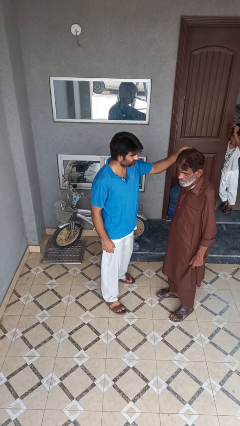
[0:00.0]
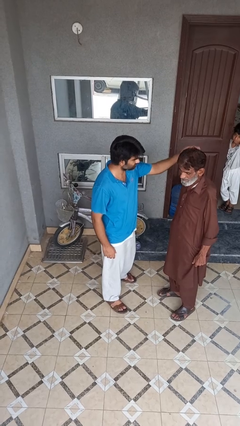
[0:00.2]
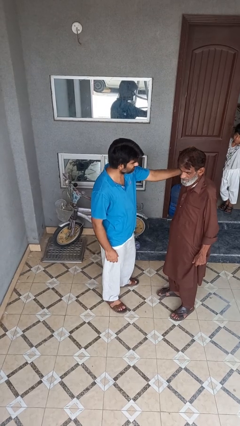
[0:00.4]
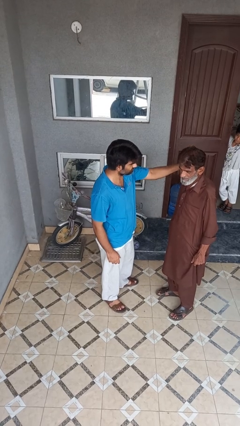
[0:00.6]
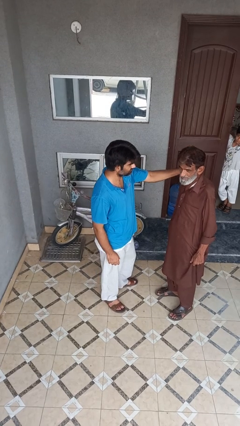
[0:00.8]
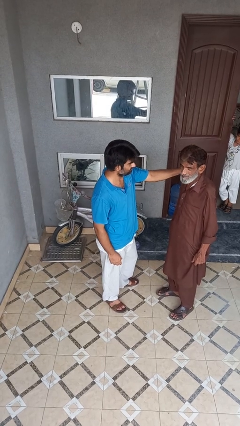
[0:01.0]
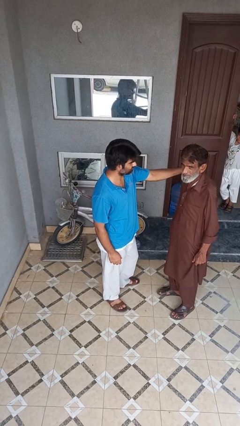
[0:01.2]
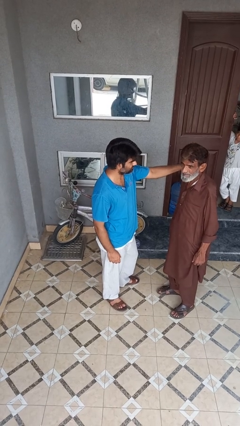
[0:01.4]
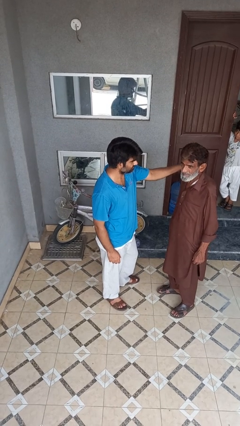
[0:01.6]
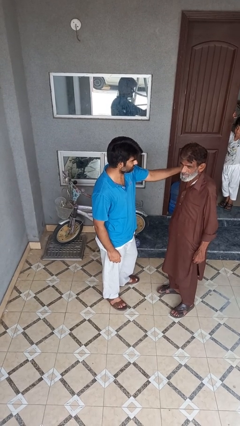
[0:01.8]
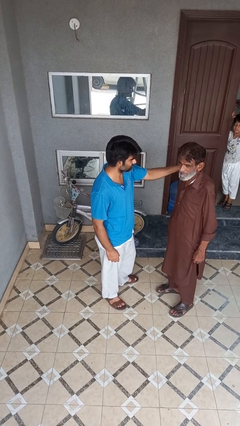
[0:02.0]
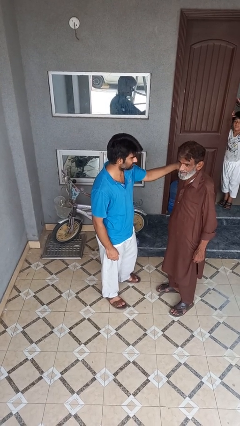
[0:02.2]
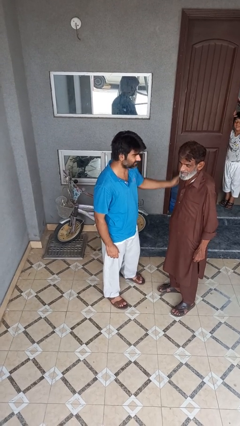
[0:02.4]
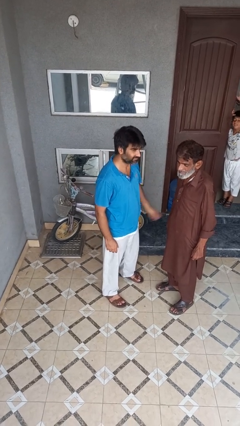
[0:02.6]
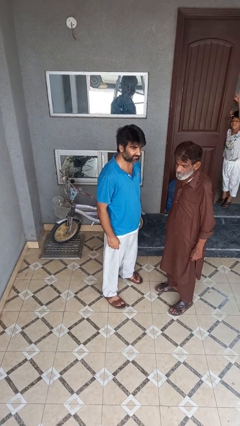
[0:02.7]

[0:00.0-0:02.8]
person pounds shoulders of person

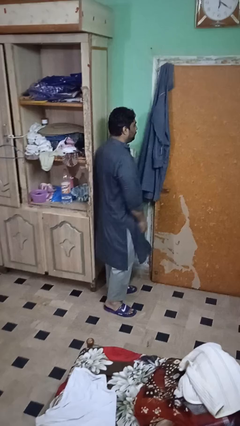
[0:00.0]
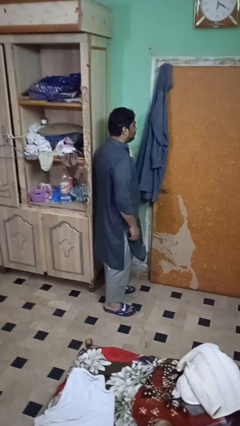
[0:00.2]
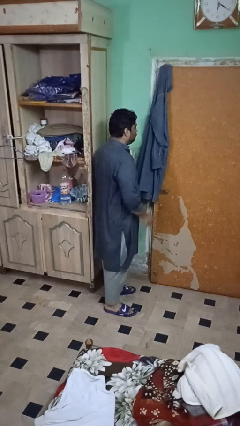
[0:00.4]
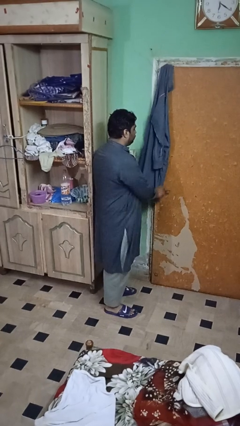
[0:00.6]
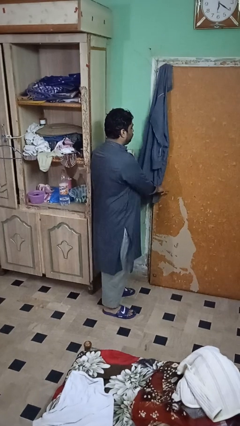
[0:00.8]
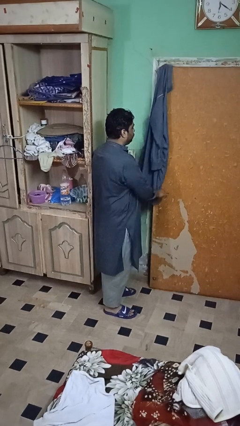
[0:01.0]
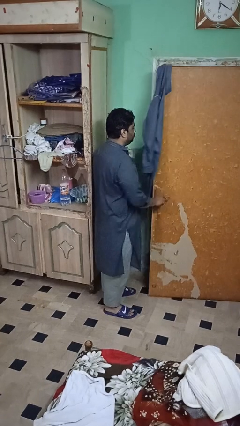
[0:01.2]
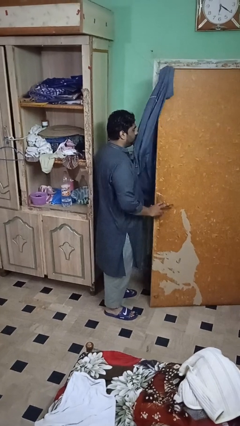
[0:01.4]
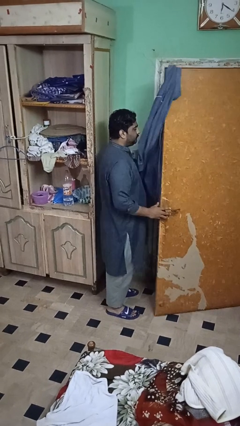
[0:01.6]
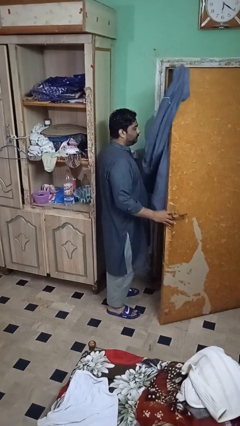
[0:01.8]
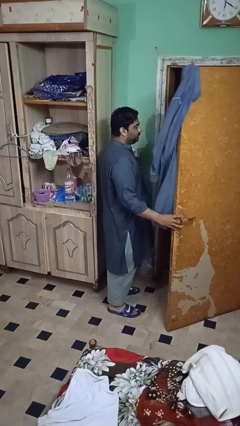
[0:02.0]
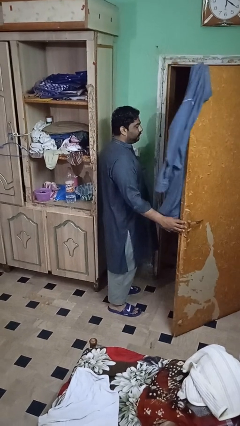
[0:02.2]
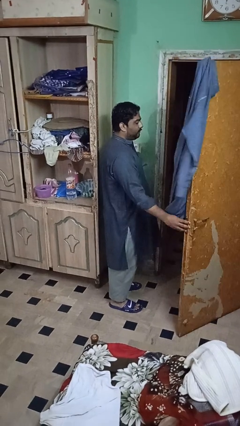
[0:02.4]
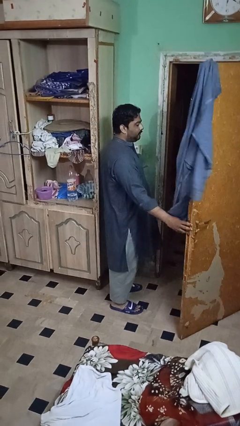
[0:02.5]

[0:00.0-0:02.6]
person opens closet door

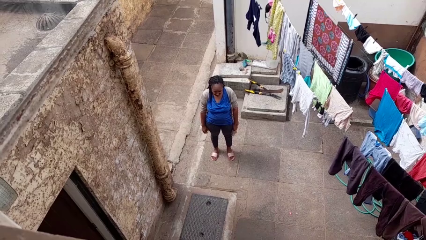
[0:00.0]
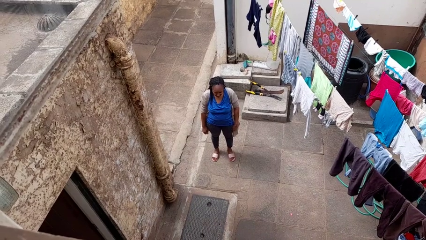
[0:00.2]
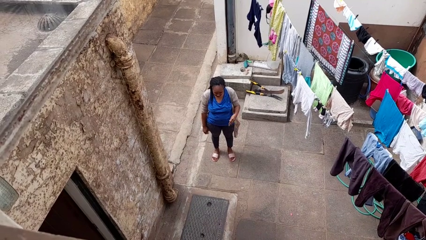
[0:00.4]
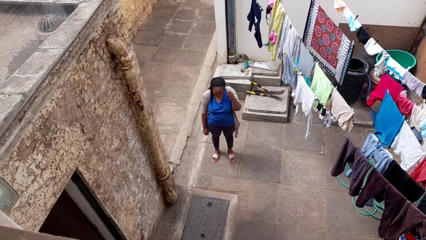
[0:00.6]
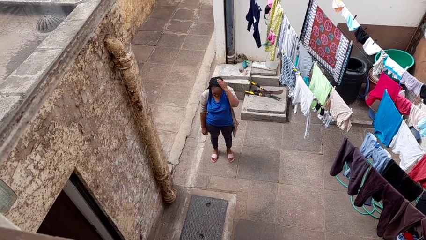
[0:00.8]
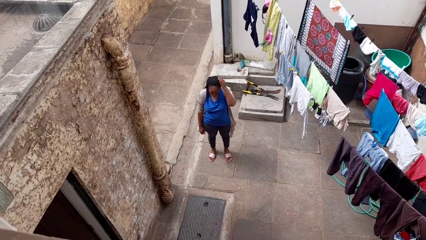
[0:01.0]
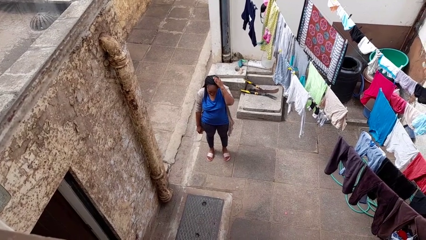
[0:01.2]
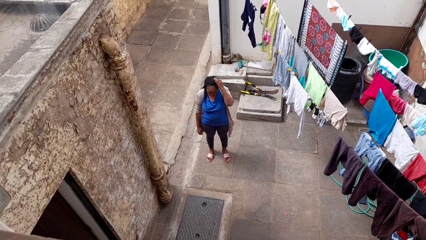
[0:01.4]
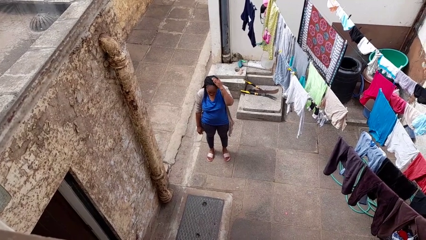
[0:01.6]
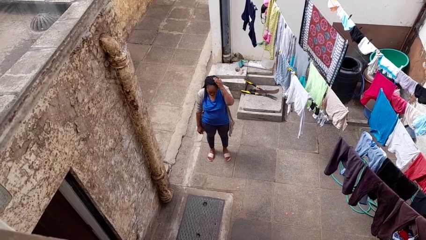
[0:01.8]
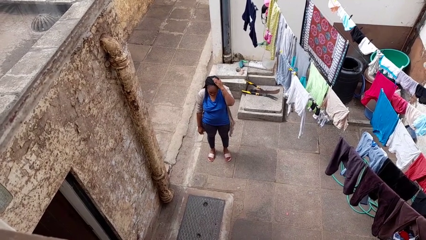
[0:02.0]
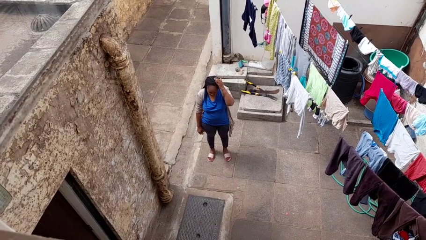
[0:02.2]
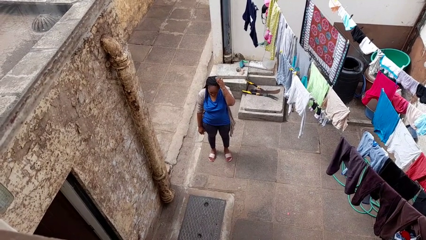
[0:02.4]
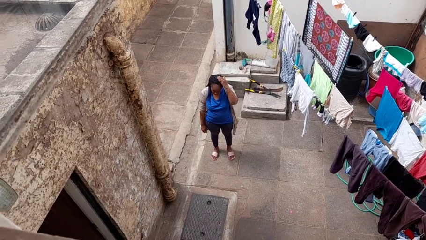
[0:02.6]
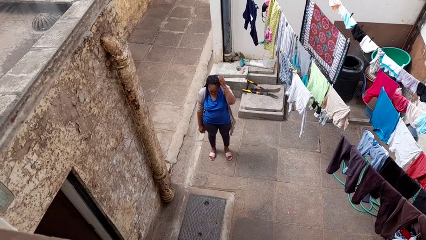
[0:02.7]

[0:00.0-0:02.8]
person pats head

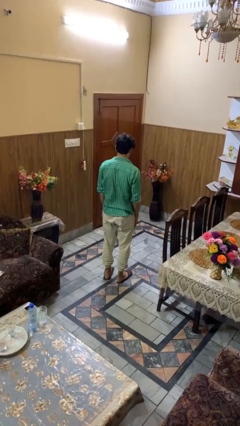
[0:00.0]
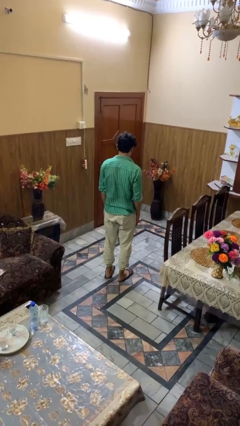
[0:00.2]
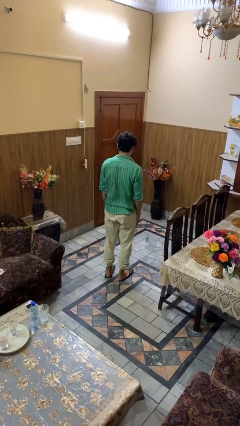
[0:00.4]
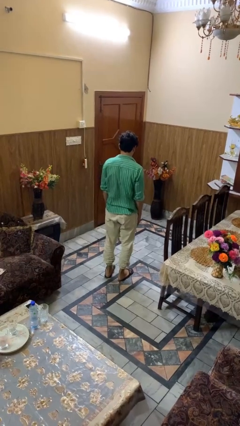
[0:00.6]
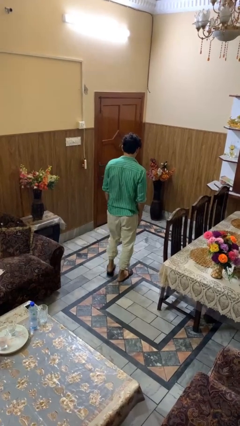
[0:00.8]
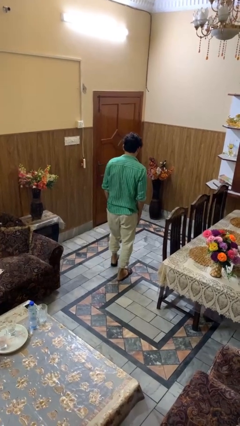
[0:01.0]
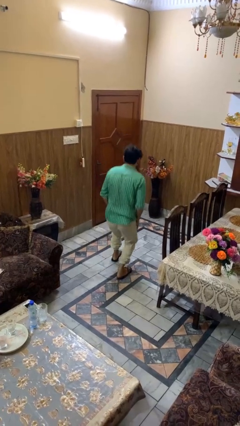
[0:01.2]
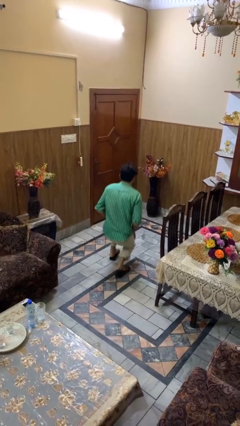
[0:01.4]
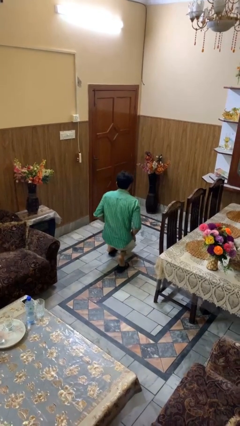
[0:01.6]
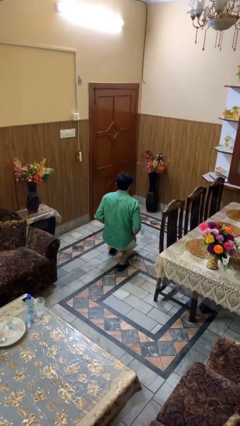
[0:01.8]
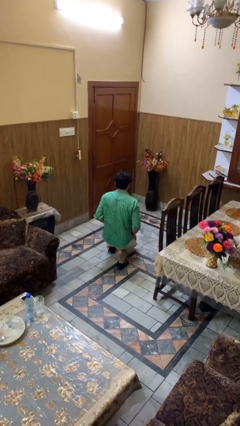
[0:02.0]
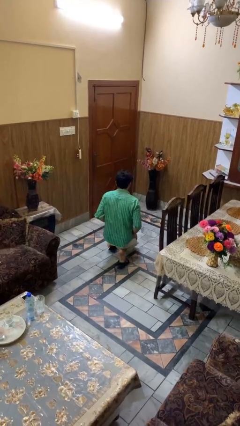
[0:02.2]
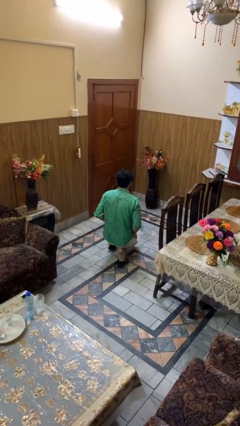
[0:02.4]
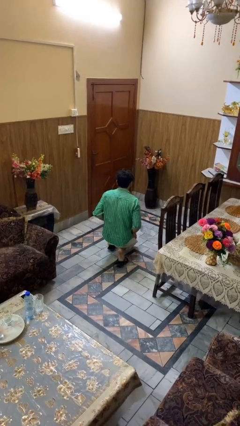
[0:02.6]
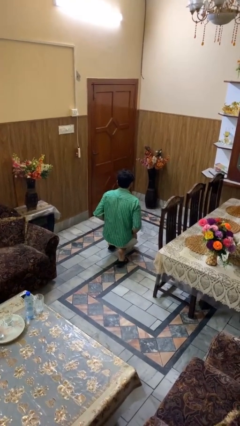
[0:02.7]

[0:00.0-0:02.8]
person kneels

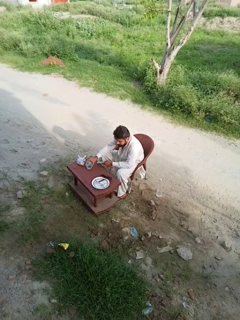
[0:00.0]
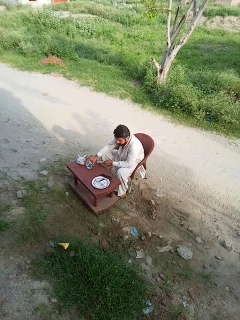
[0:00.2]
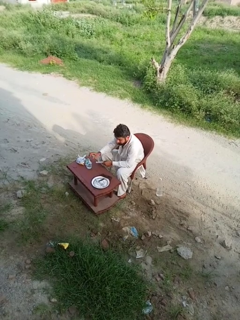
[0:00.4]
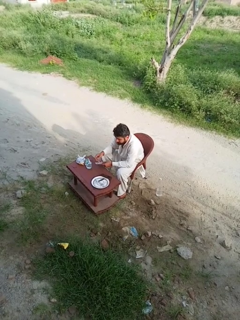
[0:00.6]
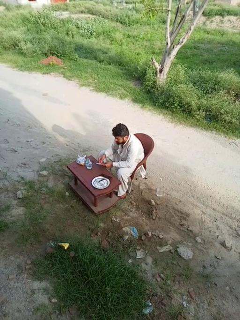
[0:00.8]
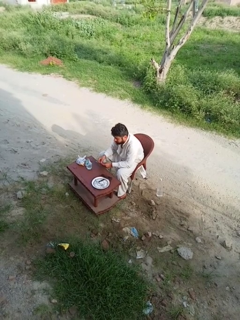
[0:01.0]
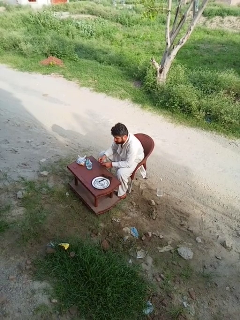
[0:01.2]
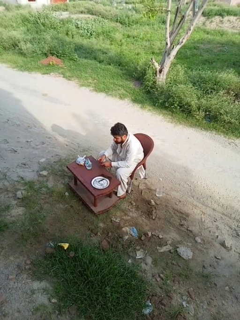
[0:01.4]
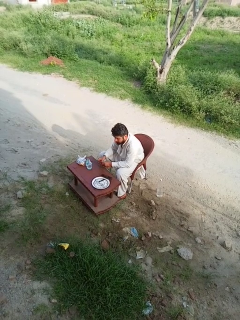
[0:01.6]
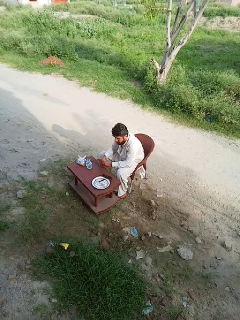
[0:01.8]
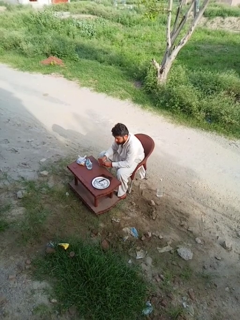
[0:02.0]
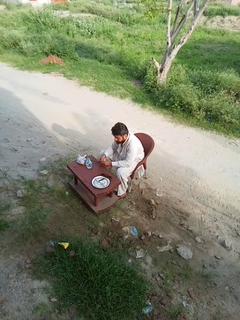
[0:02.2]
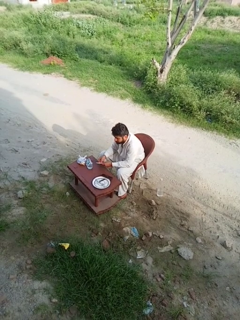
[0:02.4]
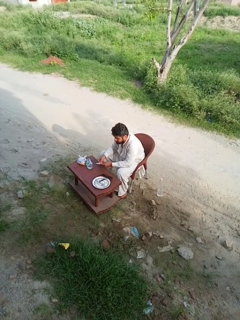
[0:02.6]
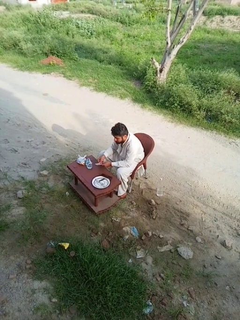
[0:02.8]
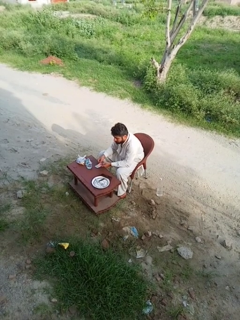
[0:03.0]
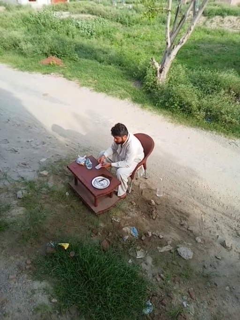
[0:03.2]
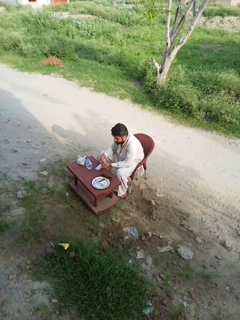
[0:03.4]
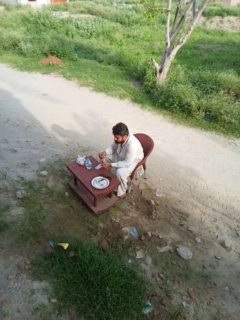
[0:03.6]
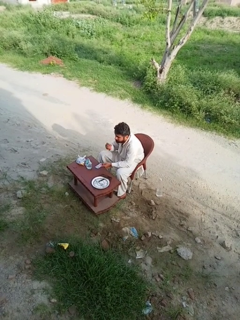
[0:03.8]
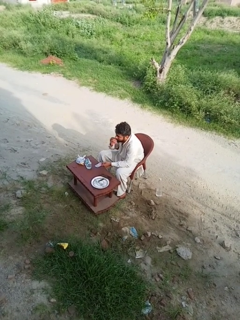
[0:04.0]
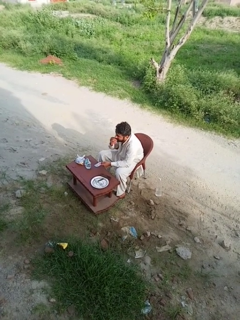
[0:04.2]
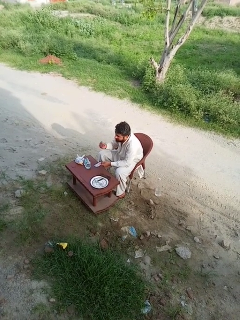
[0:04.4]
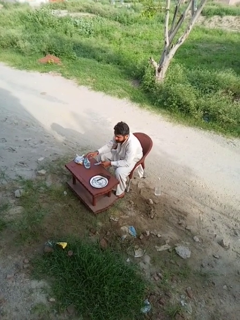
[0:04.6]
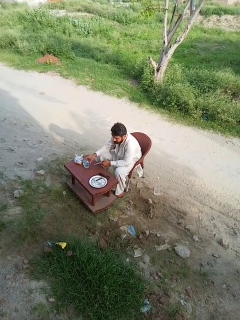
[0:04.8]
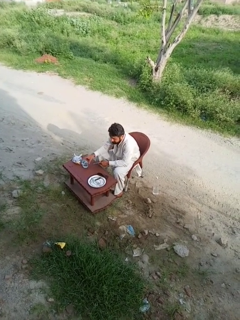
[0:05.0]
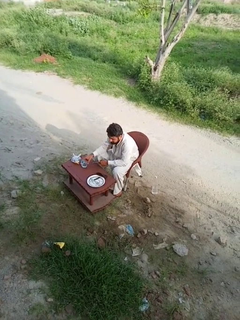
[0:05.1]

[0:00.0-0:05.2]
person takes medicine pills

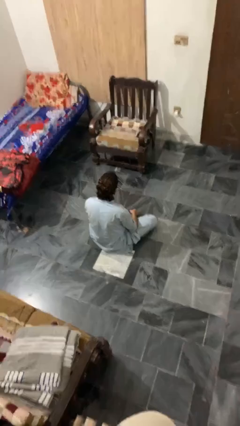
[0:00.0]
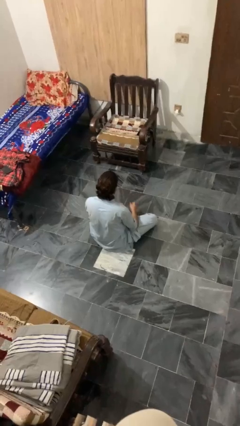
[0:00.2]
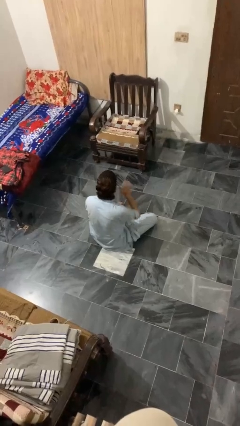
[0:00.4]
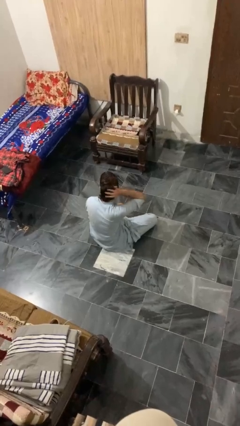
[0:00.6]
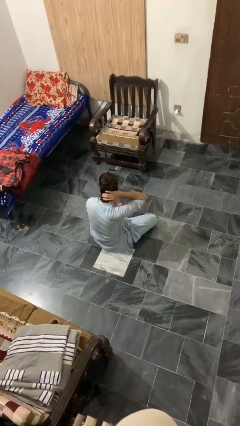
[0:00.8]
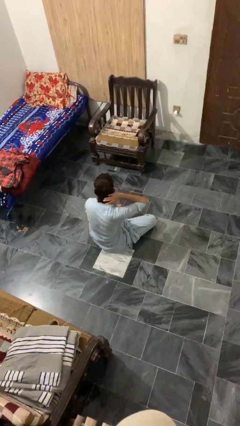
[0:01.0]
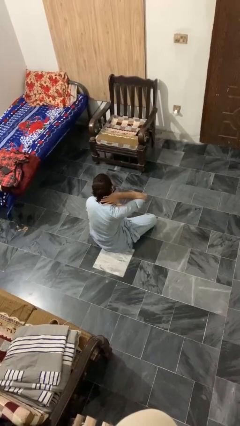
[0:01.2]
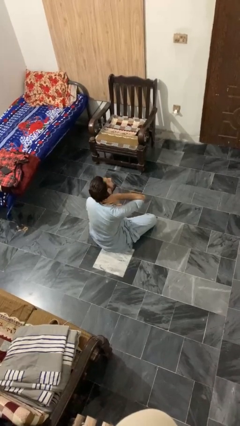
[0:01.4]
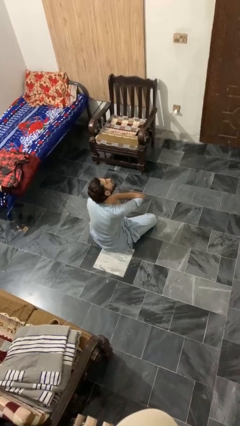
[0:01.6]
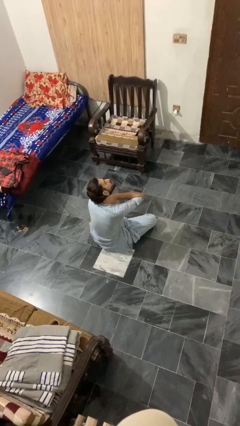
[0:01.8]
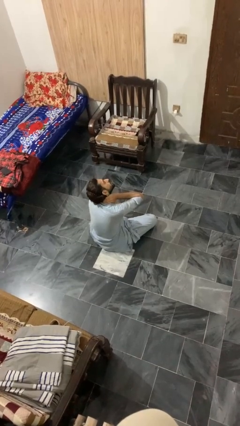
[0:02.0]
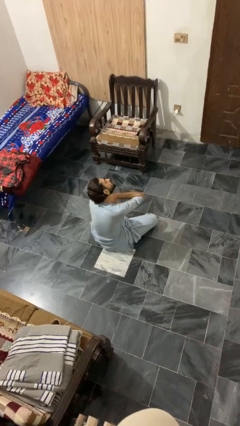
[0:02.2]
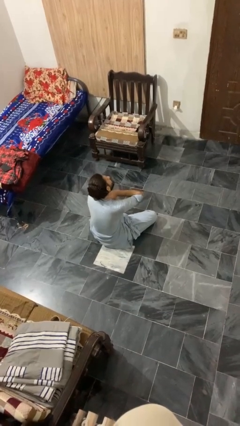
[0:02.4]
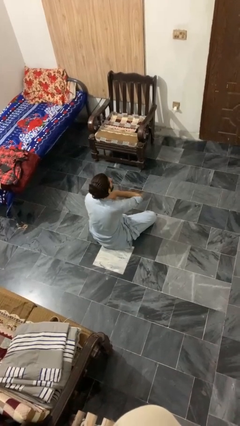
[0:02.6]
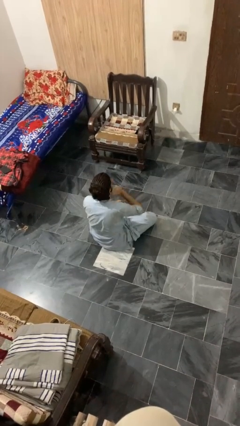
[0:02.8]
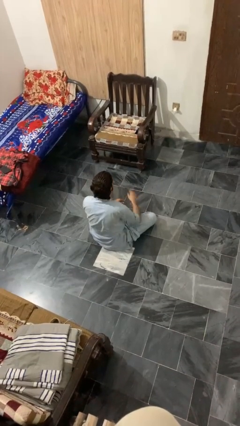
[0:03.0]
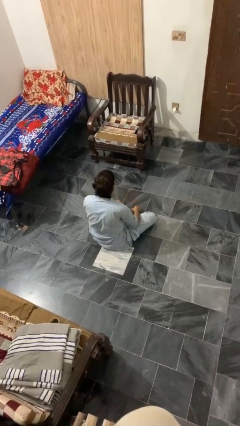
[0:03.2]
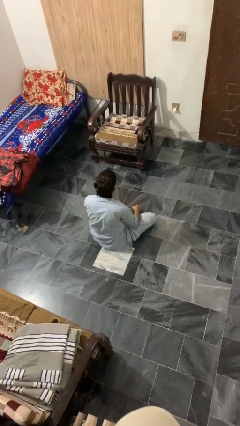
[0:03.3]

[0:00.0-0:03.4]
person rubs neck
